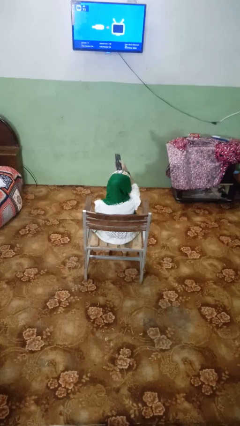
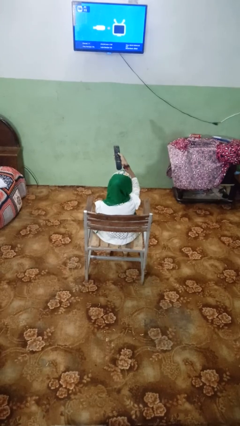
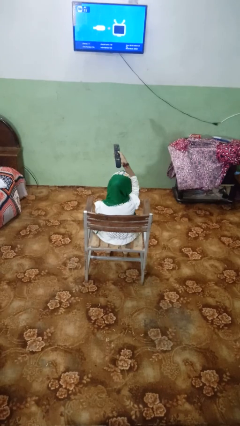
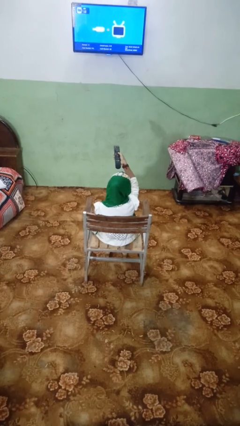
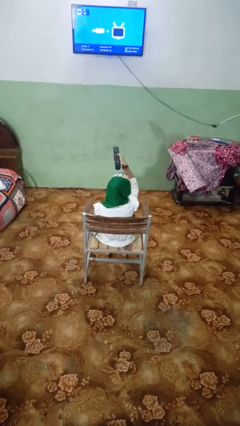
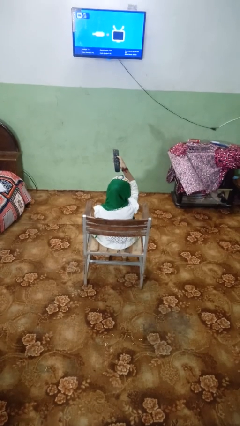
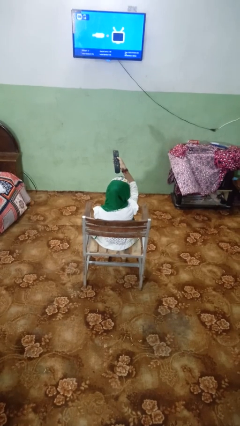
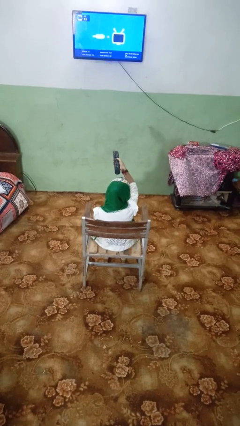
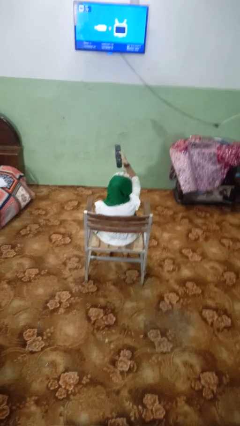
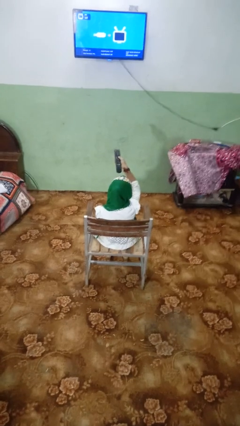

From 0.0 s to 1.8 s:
person uses television remote

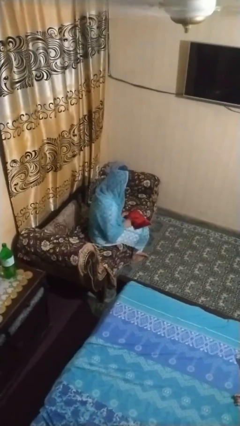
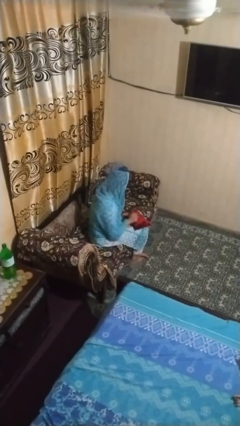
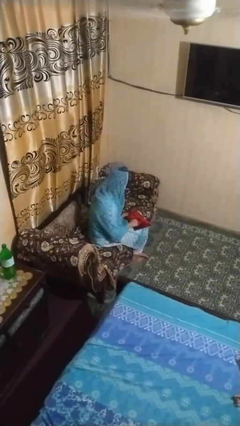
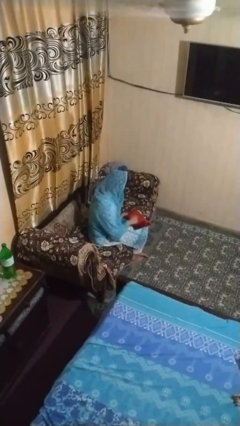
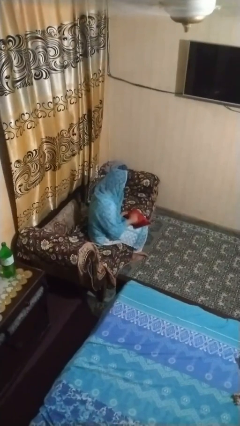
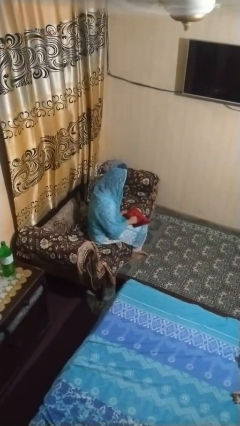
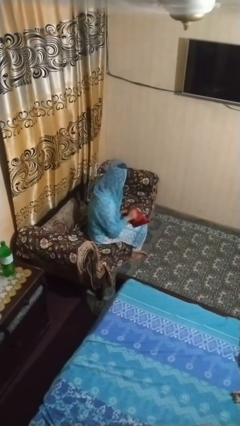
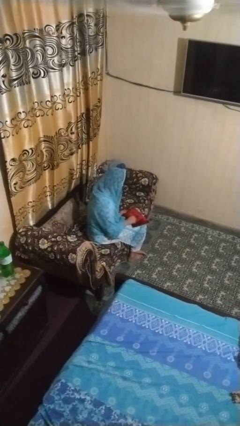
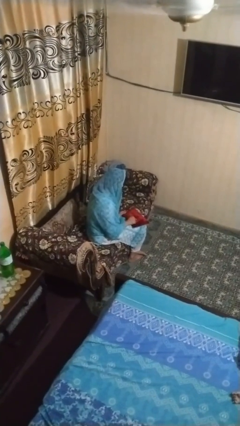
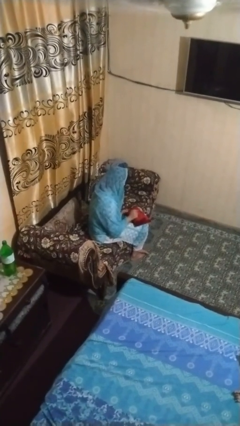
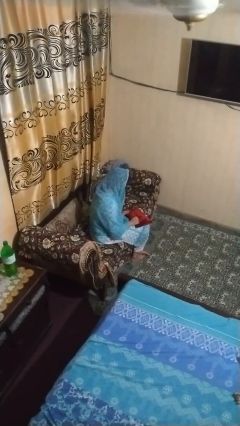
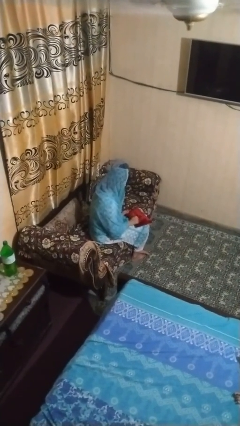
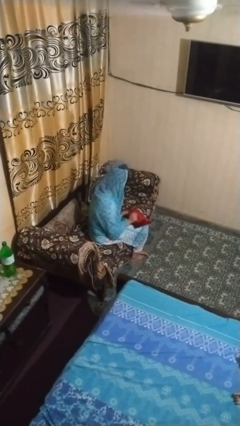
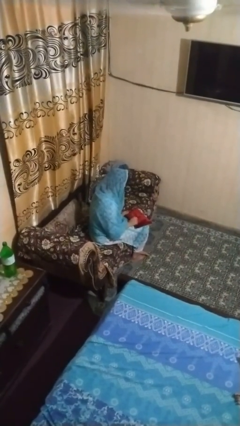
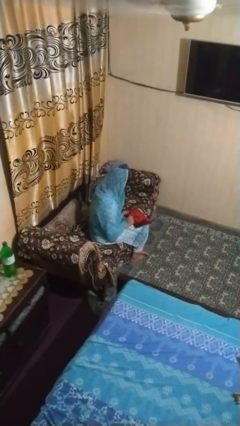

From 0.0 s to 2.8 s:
person taps object with finger

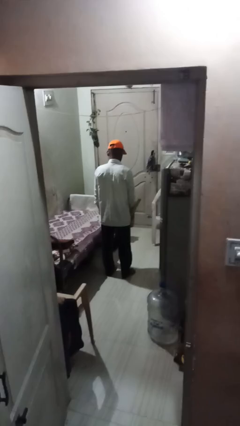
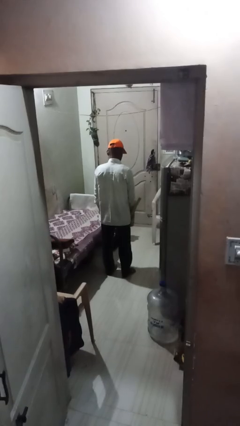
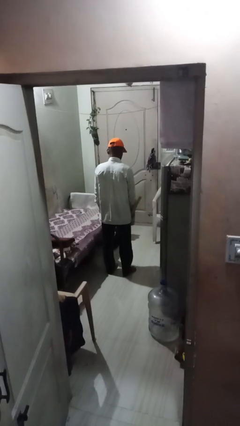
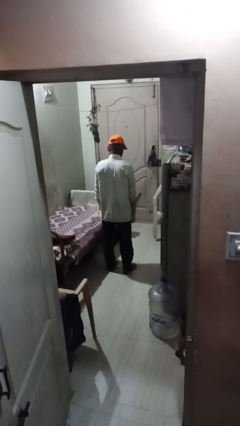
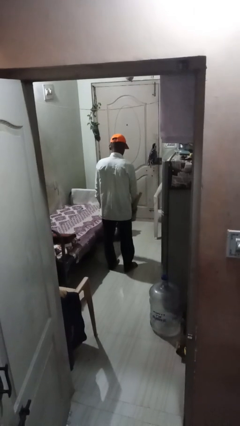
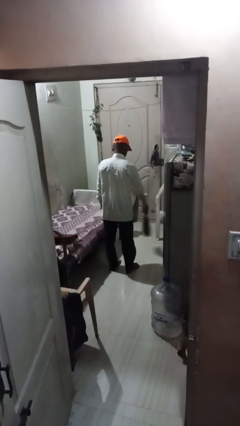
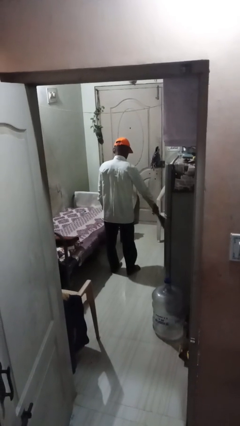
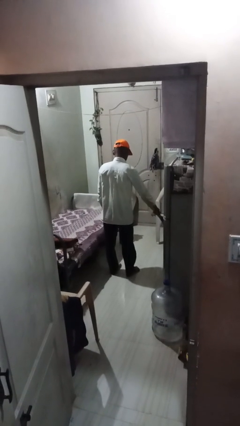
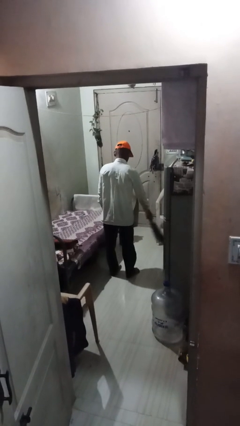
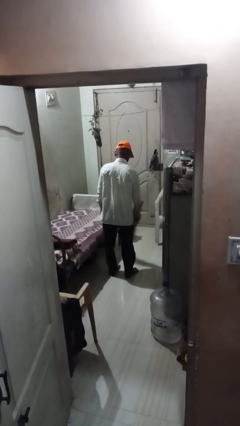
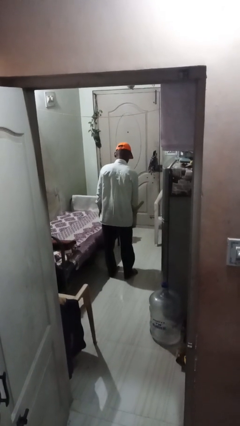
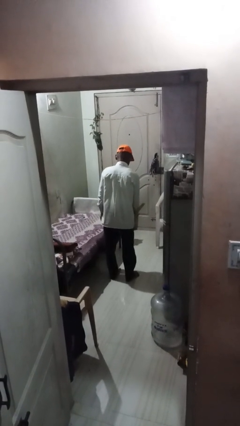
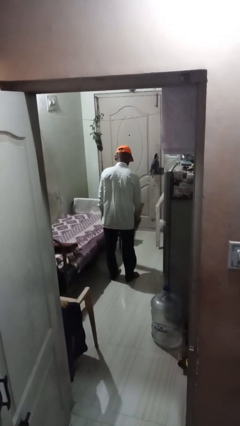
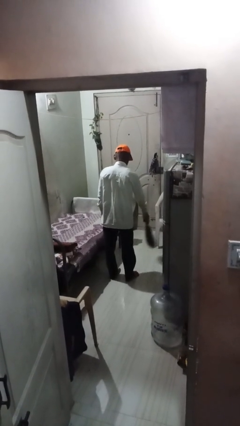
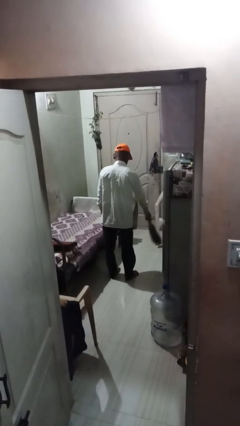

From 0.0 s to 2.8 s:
person mops

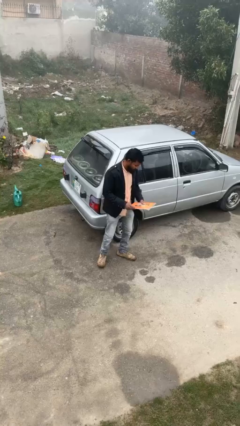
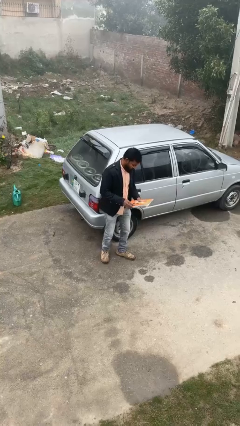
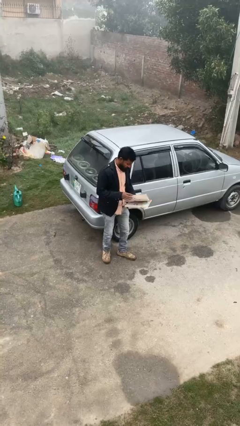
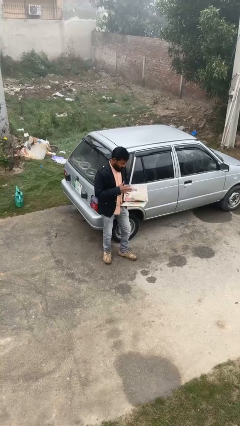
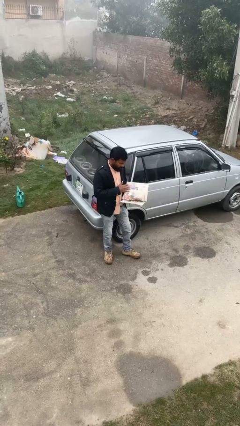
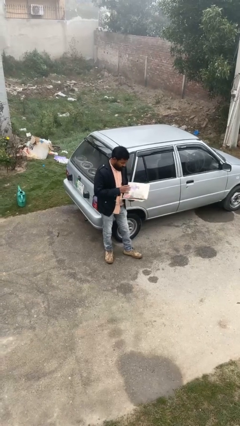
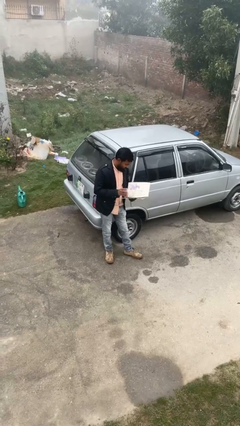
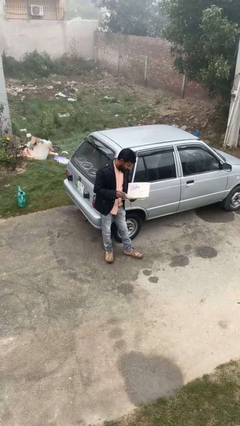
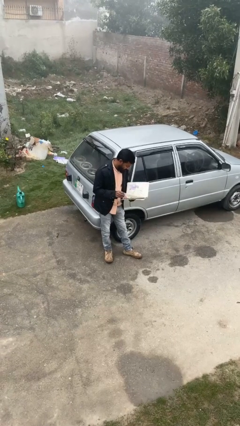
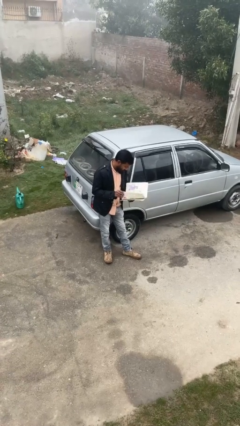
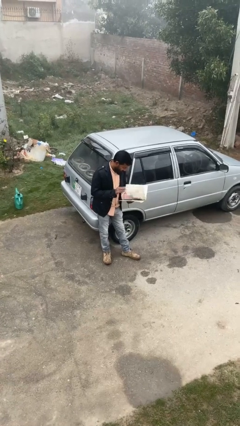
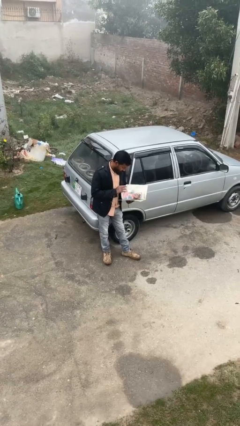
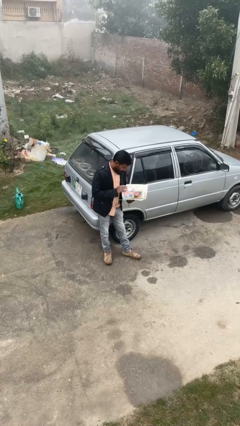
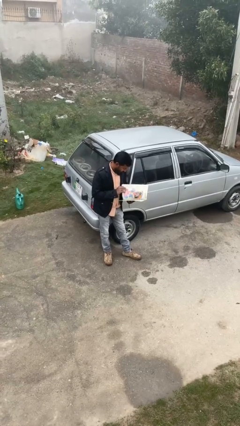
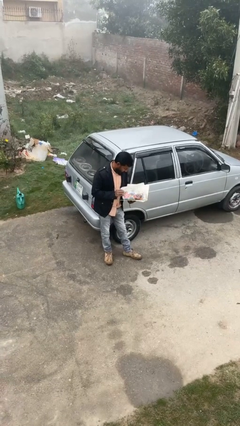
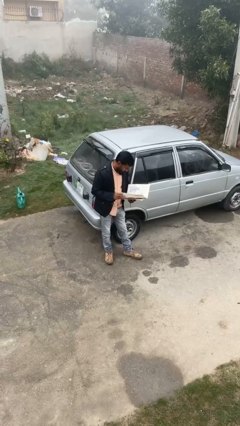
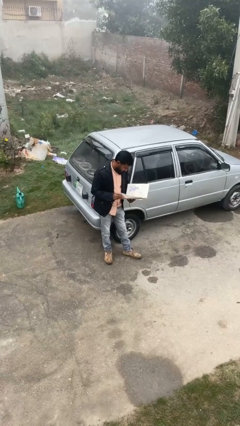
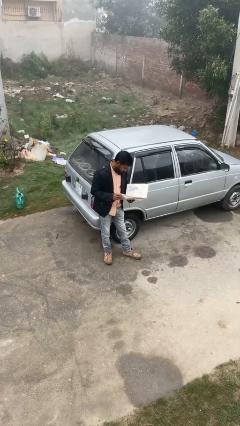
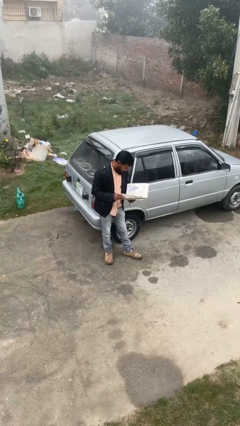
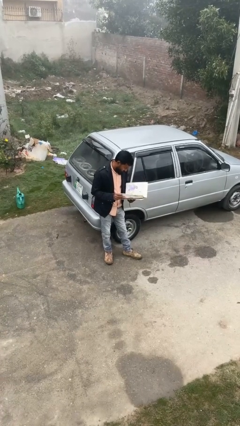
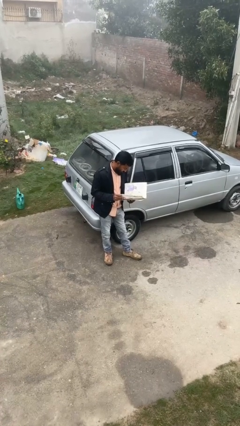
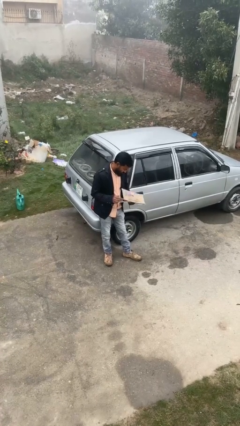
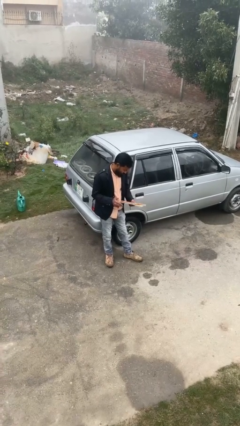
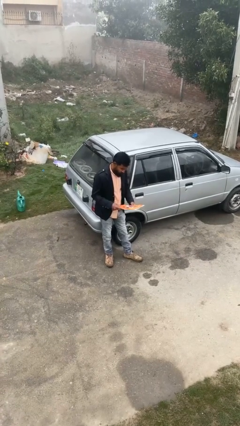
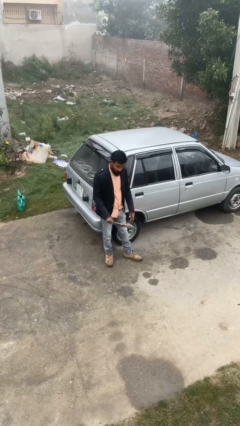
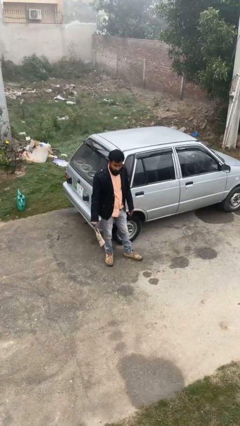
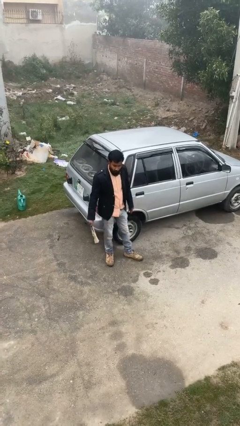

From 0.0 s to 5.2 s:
person reads document

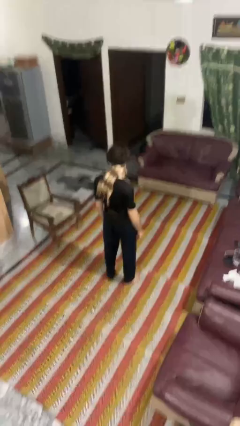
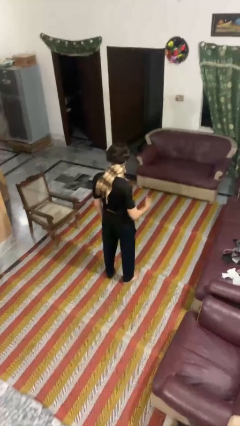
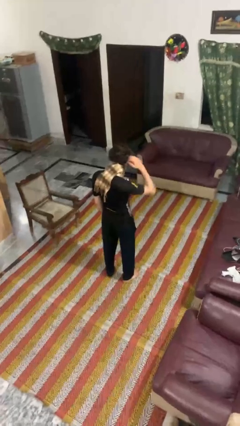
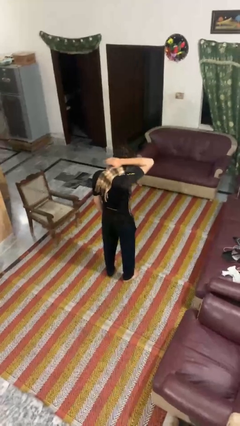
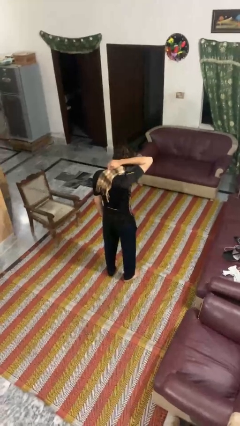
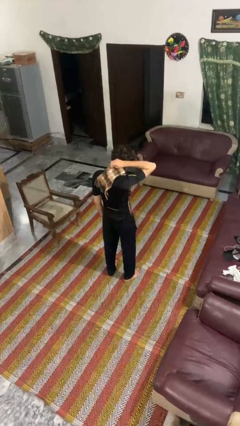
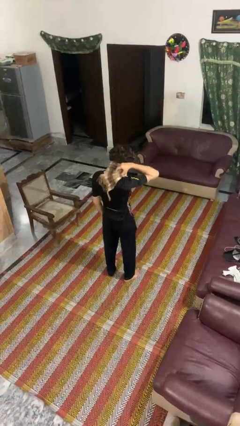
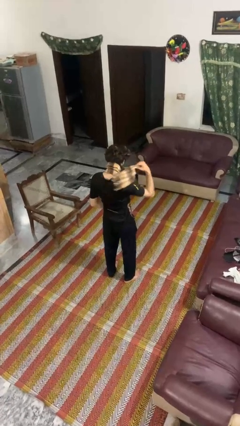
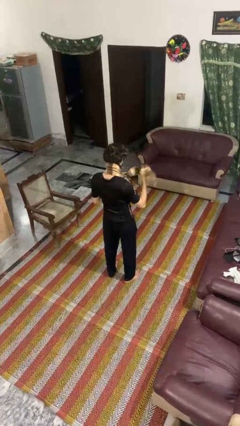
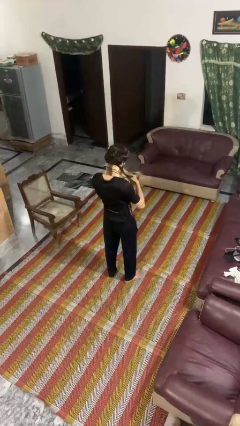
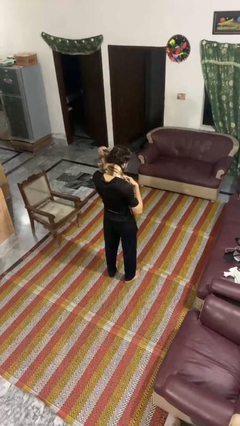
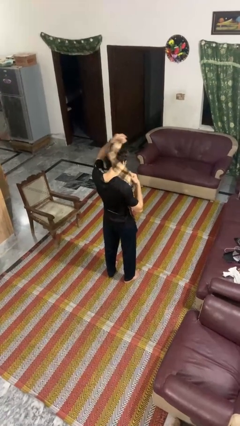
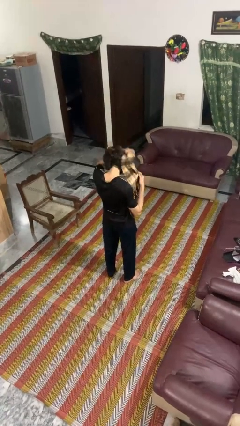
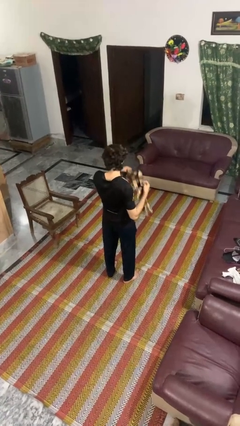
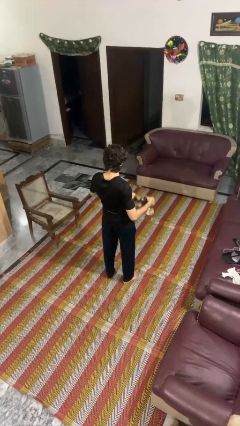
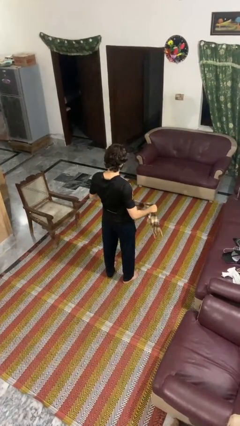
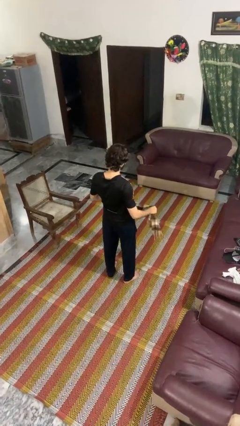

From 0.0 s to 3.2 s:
person takes off scarf

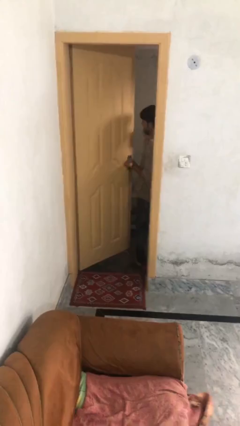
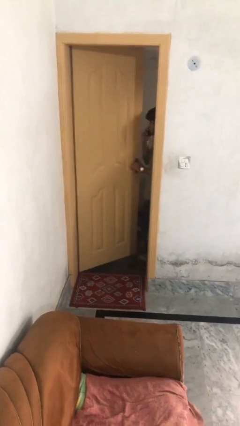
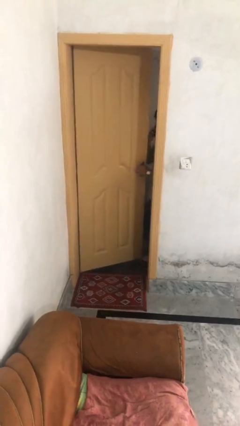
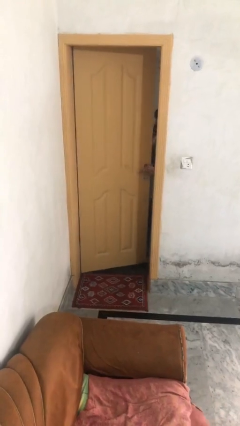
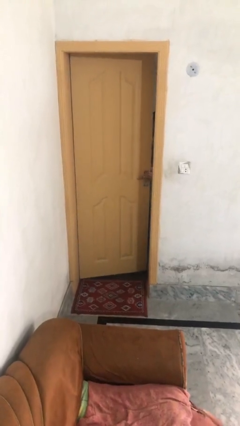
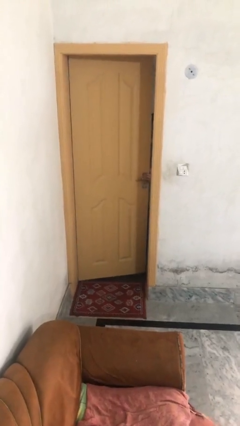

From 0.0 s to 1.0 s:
person closes facility door

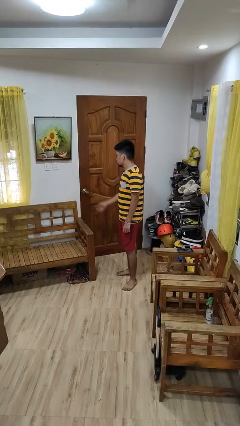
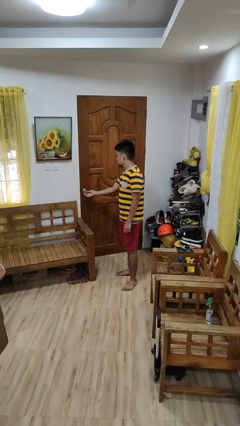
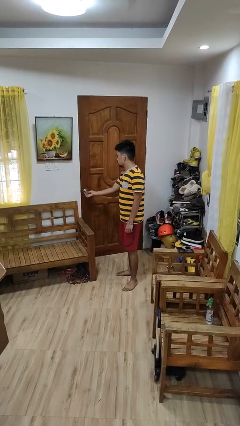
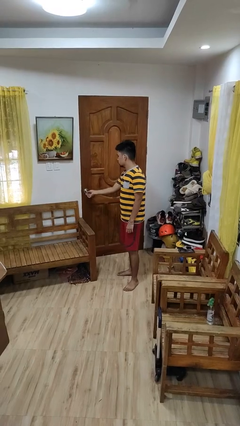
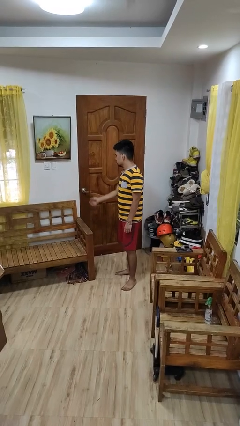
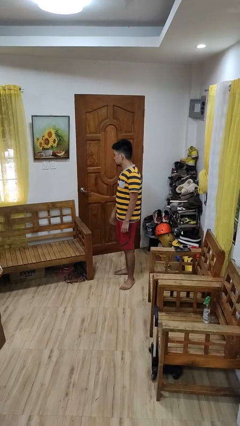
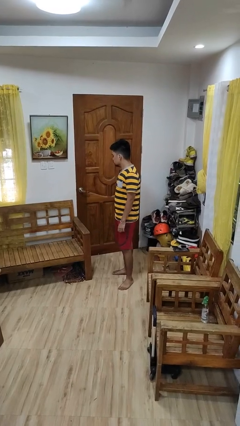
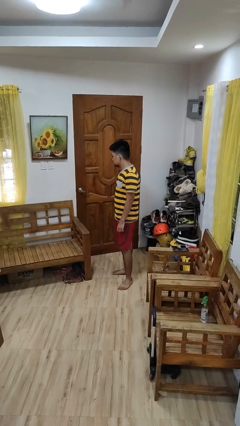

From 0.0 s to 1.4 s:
person locks door with keys
